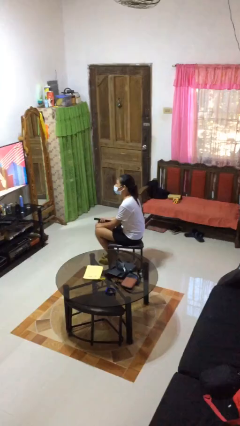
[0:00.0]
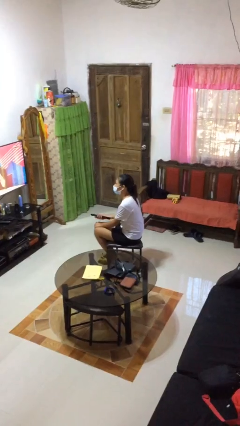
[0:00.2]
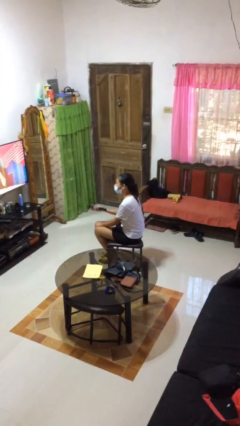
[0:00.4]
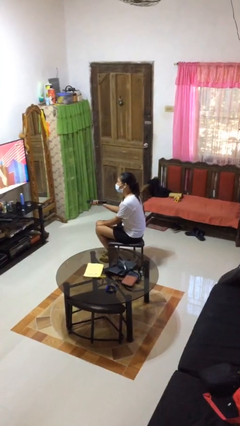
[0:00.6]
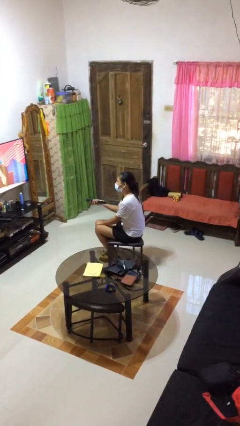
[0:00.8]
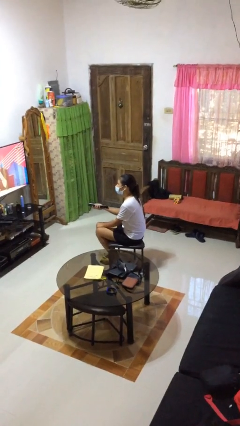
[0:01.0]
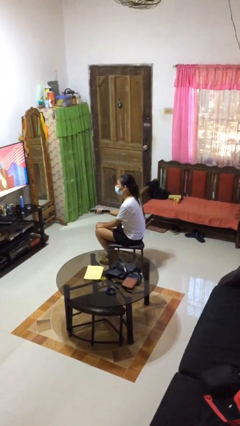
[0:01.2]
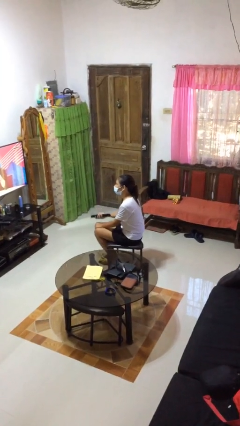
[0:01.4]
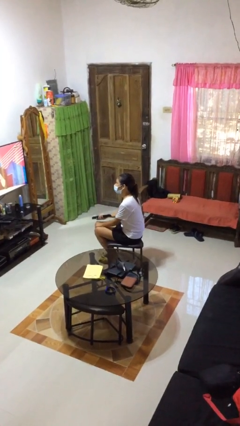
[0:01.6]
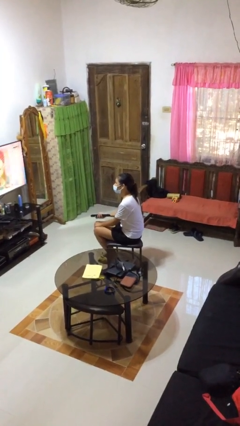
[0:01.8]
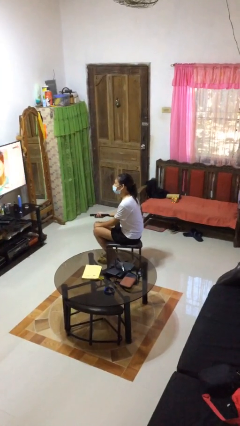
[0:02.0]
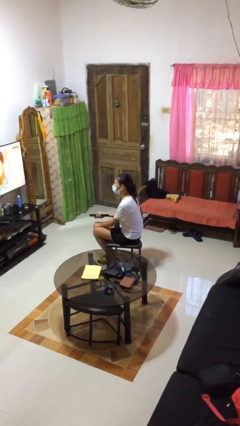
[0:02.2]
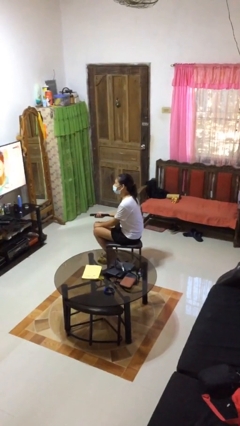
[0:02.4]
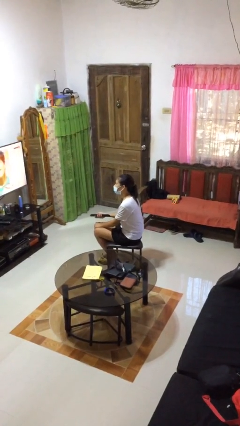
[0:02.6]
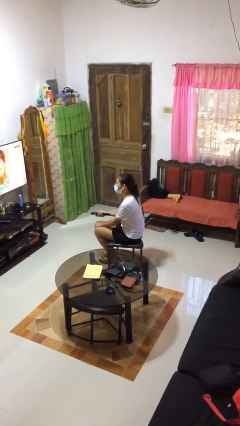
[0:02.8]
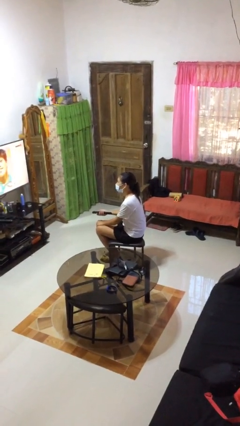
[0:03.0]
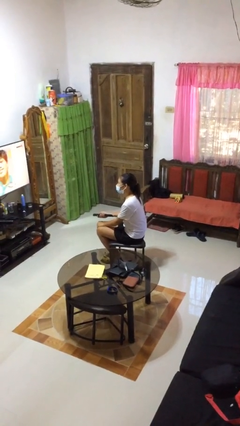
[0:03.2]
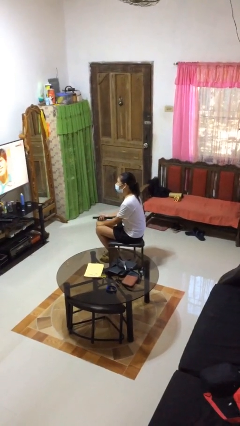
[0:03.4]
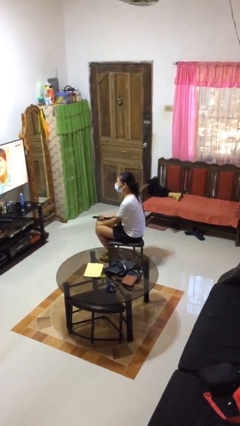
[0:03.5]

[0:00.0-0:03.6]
person uses television remote

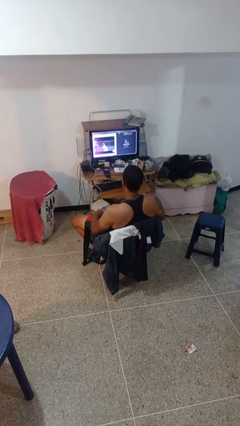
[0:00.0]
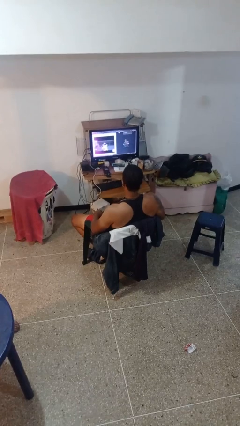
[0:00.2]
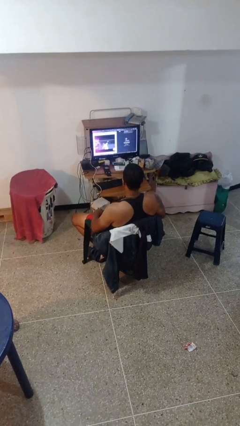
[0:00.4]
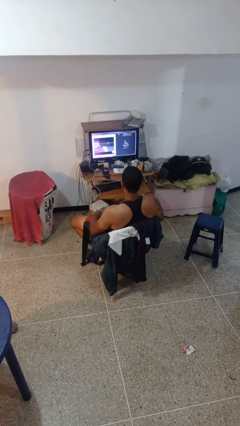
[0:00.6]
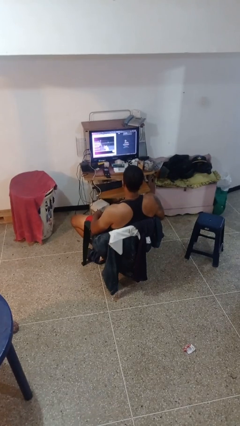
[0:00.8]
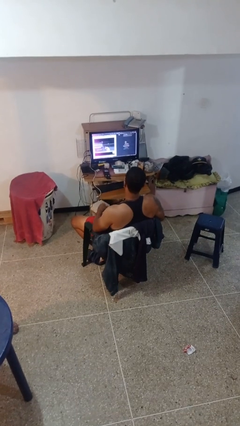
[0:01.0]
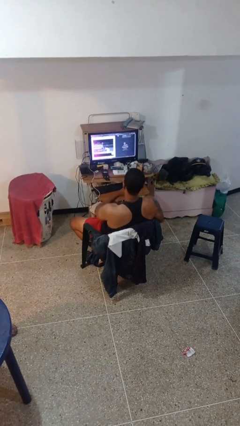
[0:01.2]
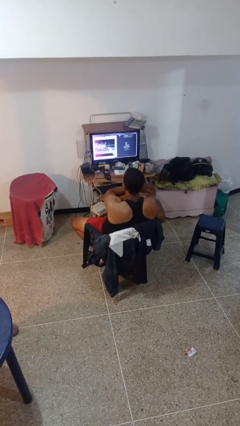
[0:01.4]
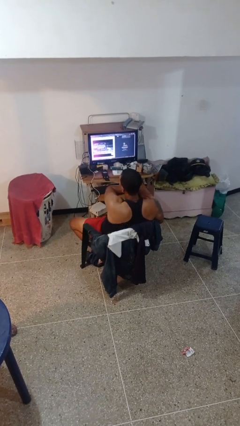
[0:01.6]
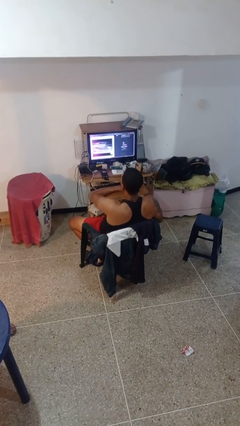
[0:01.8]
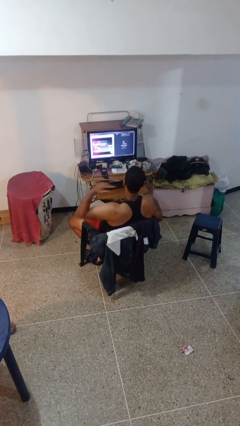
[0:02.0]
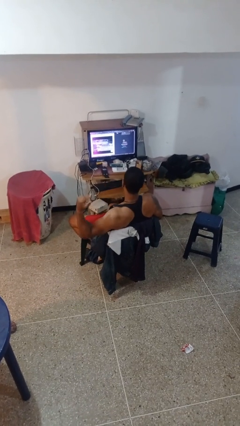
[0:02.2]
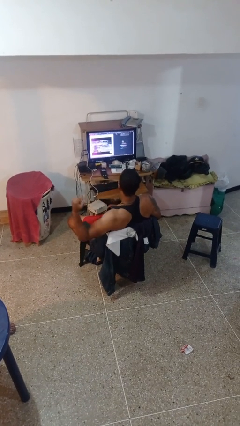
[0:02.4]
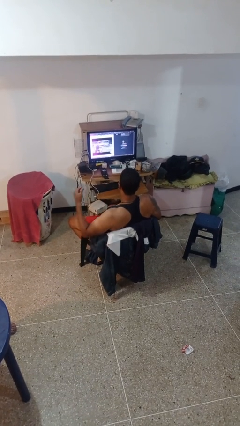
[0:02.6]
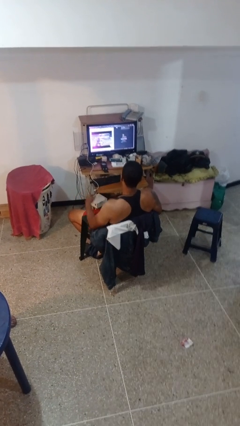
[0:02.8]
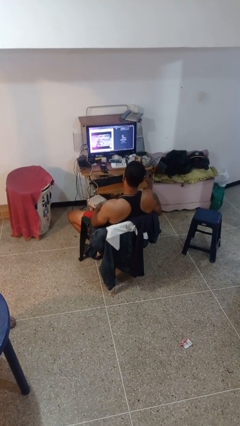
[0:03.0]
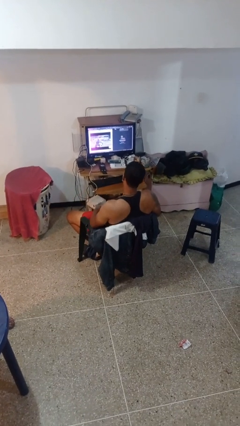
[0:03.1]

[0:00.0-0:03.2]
person gestures cut

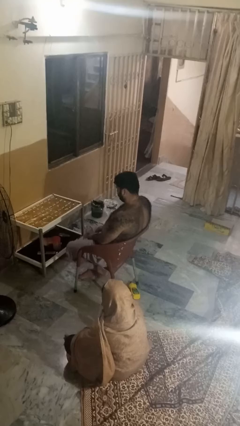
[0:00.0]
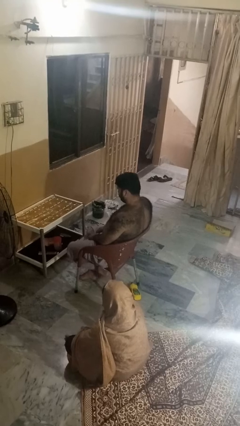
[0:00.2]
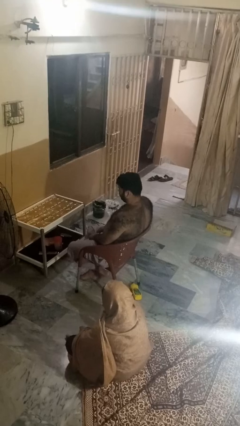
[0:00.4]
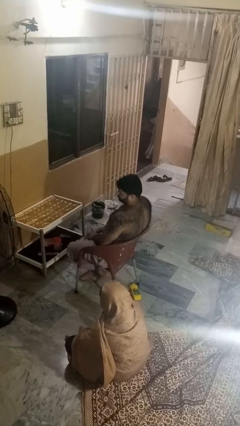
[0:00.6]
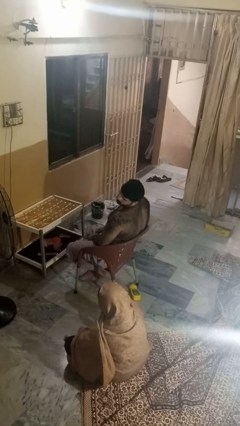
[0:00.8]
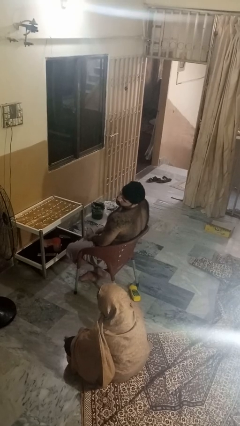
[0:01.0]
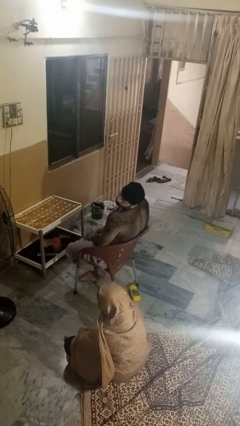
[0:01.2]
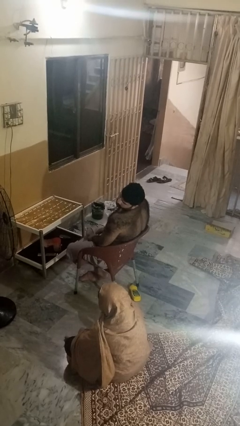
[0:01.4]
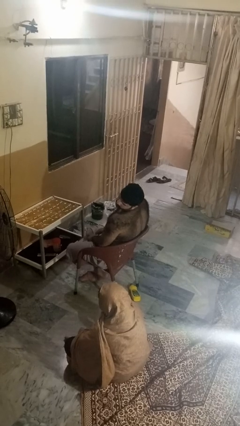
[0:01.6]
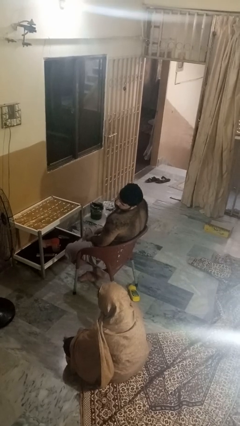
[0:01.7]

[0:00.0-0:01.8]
person looks over shoulder

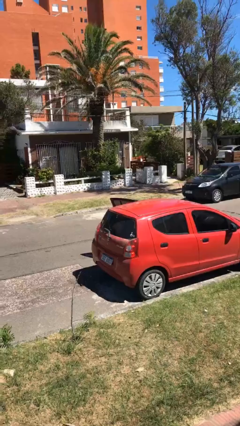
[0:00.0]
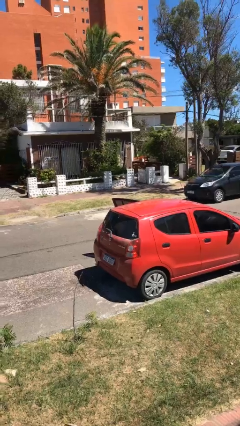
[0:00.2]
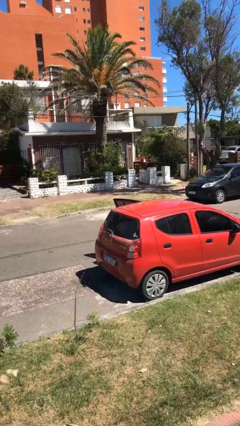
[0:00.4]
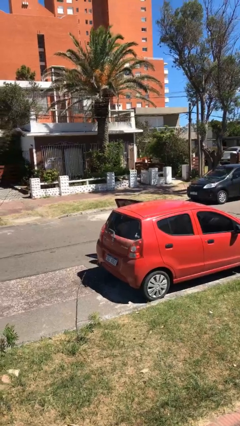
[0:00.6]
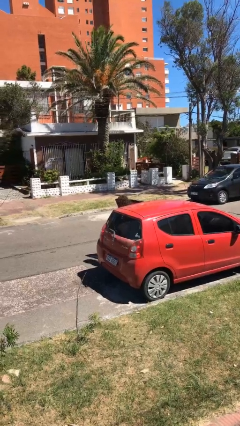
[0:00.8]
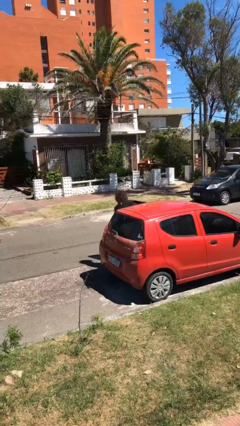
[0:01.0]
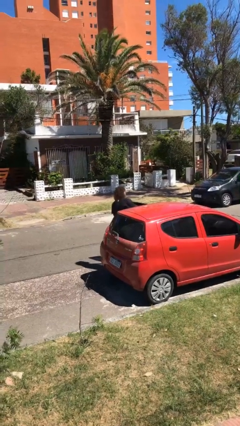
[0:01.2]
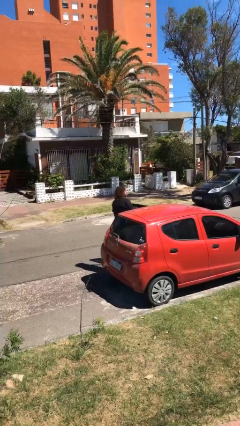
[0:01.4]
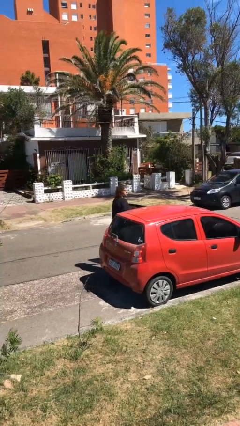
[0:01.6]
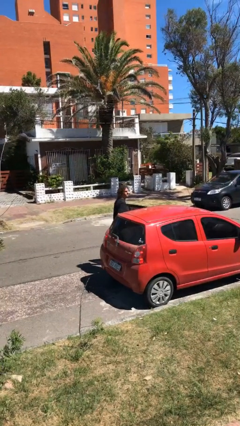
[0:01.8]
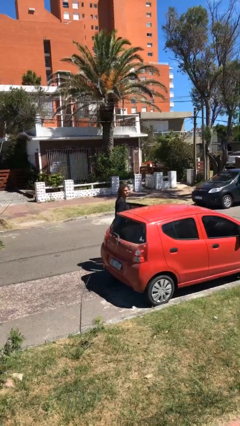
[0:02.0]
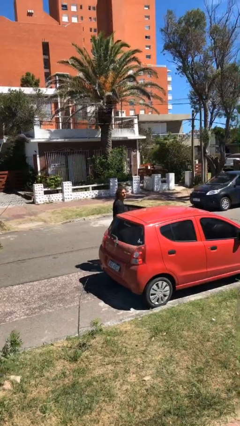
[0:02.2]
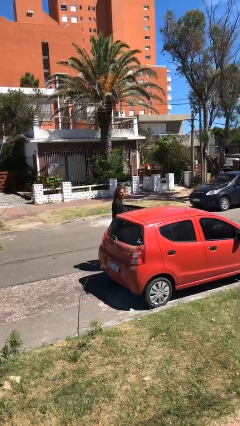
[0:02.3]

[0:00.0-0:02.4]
person exits car

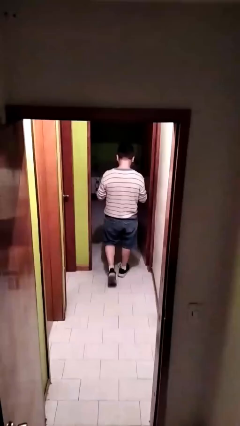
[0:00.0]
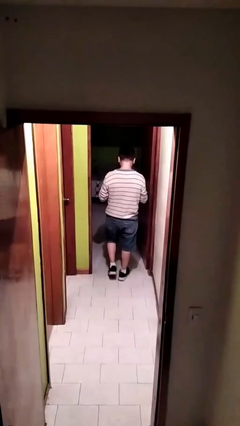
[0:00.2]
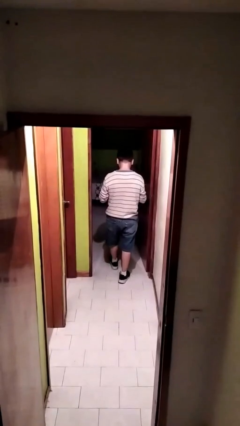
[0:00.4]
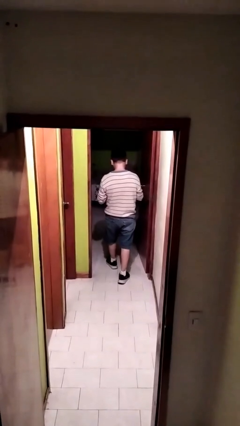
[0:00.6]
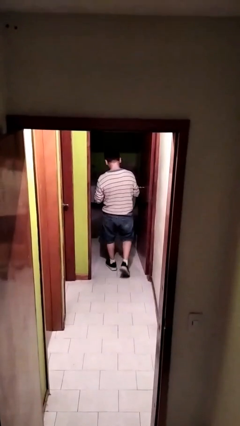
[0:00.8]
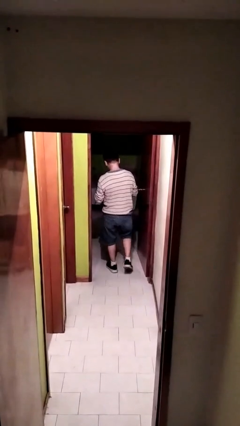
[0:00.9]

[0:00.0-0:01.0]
person exits scene through structure

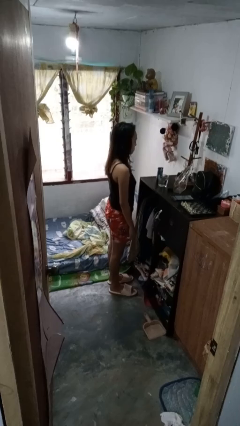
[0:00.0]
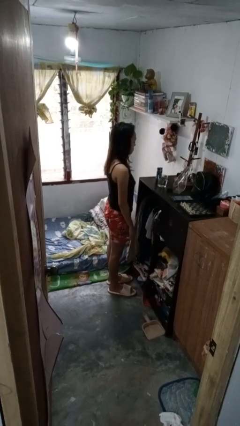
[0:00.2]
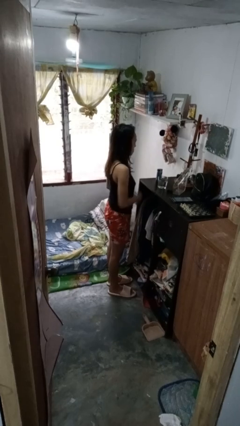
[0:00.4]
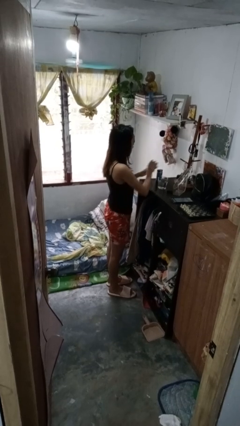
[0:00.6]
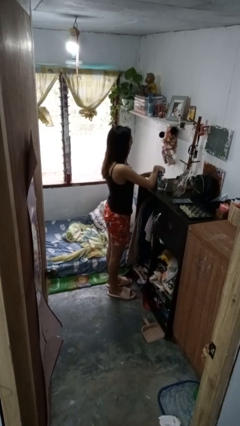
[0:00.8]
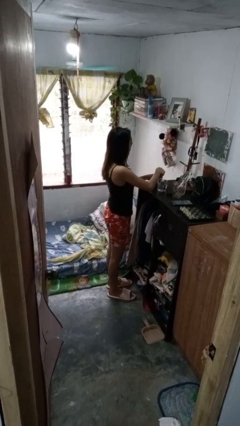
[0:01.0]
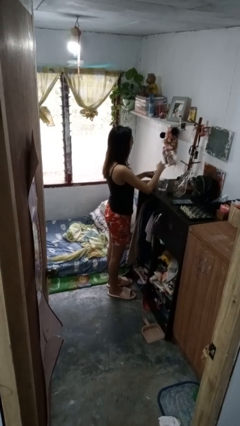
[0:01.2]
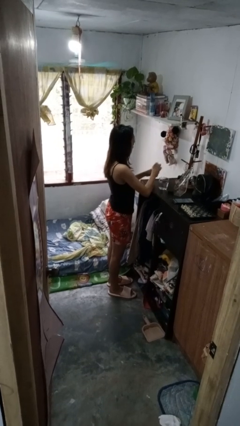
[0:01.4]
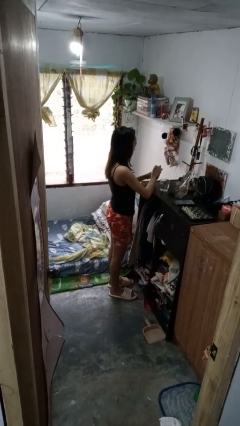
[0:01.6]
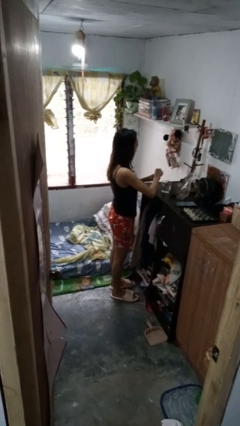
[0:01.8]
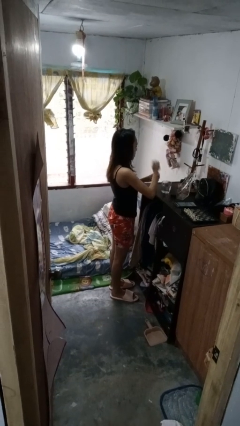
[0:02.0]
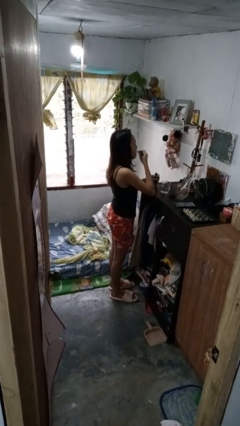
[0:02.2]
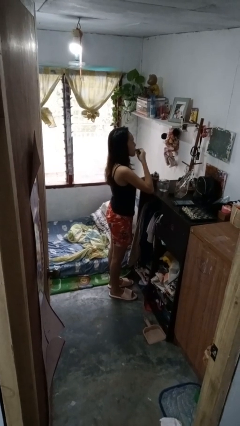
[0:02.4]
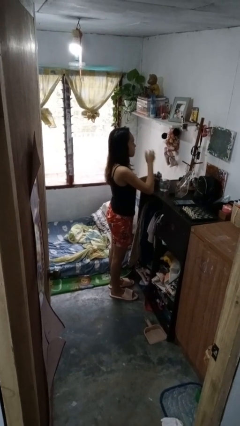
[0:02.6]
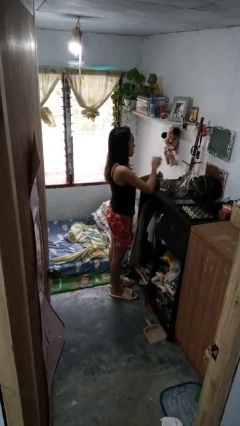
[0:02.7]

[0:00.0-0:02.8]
person takes medicine pills

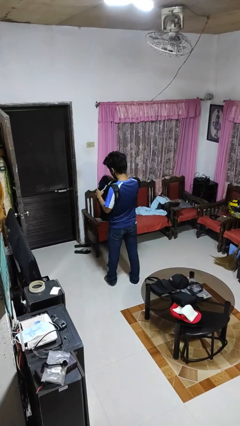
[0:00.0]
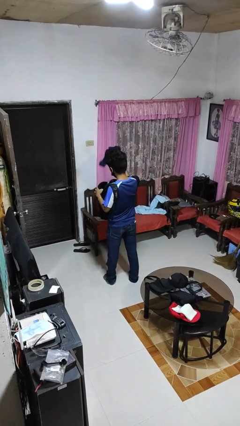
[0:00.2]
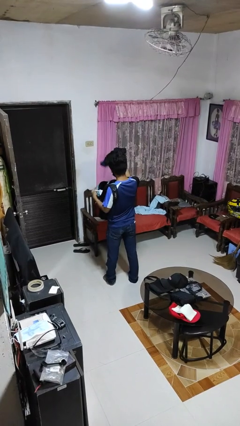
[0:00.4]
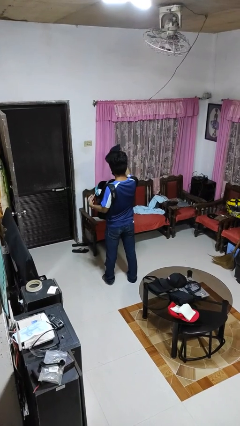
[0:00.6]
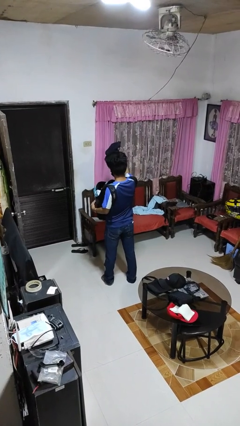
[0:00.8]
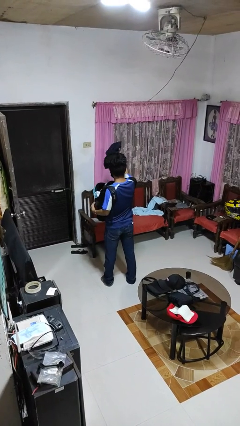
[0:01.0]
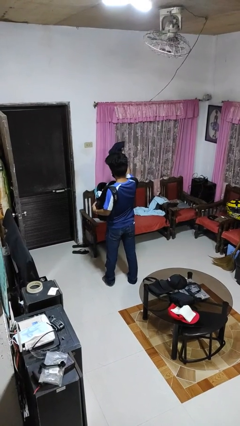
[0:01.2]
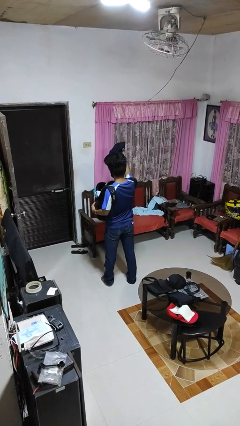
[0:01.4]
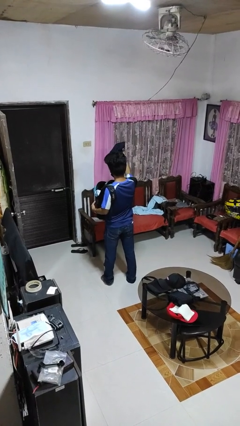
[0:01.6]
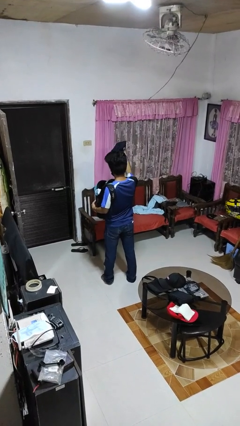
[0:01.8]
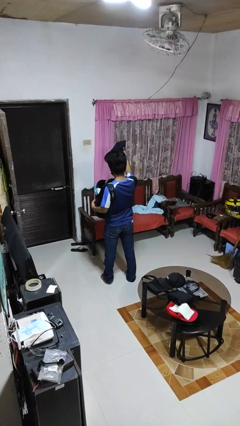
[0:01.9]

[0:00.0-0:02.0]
person takes object from backpack

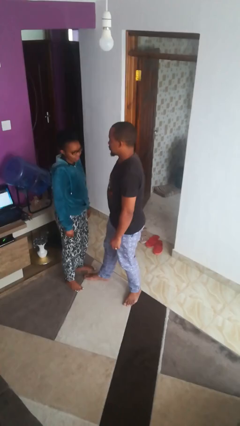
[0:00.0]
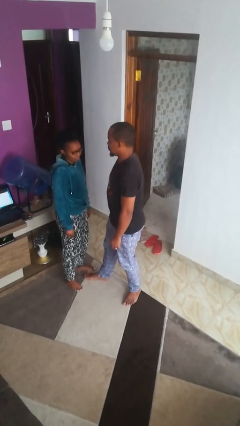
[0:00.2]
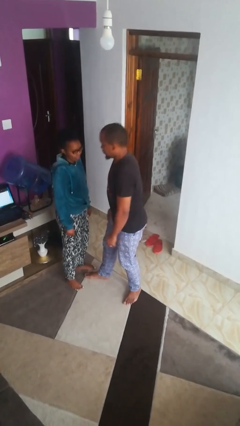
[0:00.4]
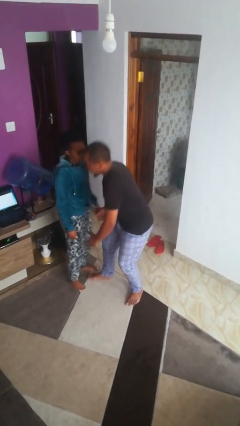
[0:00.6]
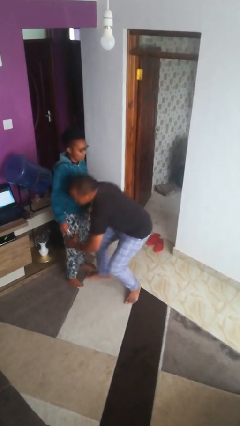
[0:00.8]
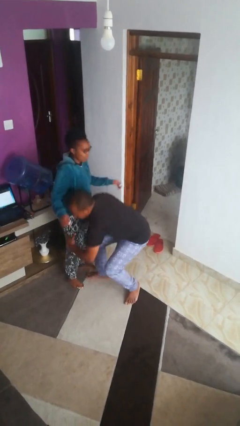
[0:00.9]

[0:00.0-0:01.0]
person puts down person
